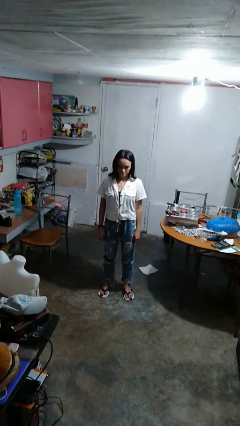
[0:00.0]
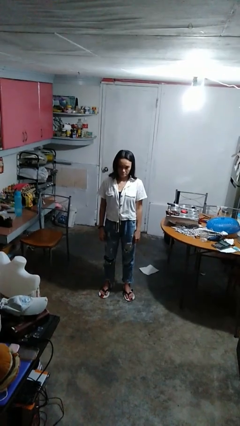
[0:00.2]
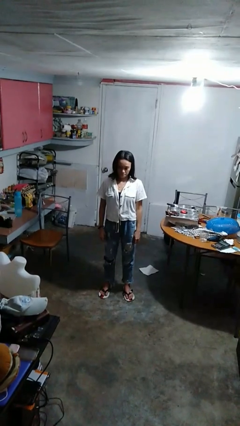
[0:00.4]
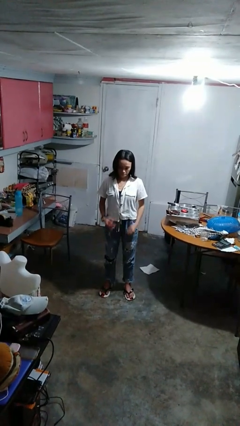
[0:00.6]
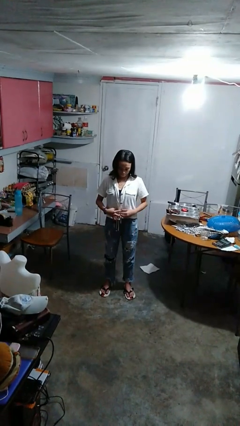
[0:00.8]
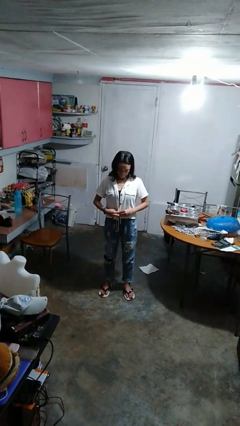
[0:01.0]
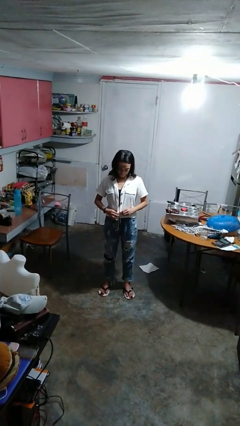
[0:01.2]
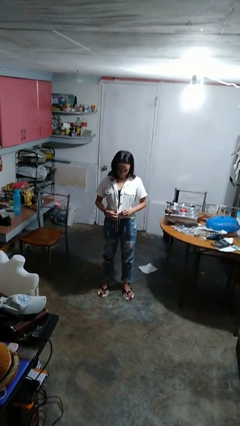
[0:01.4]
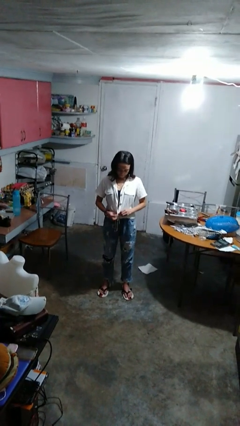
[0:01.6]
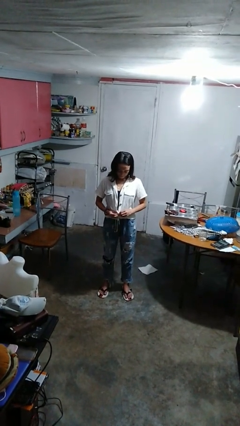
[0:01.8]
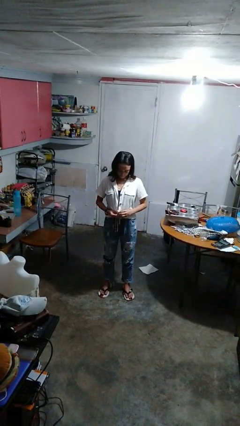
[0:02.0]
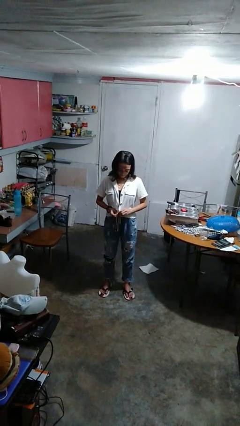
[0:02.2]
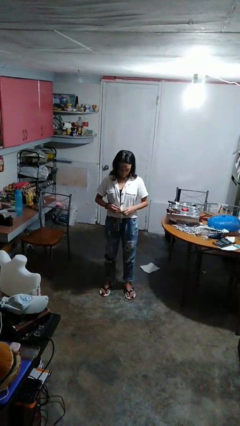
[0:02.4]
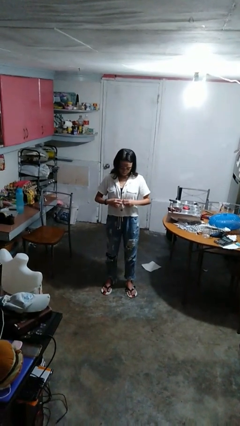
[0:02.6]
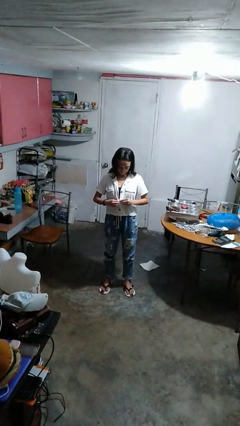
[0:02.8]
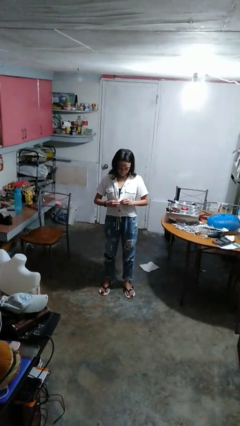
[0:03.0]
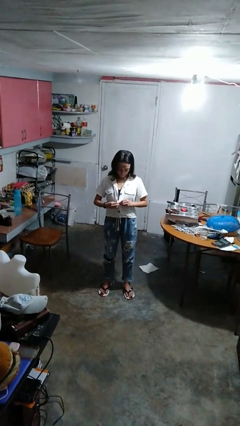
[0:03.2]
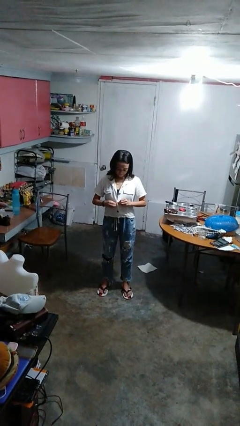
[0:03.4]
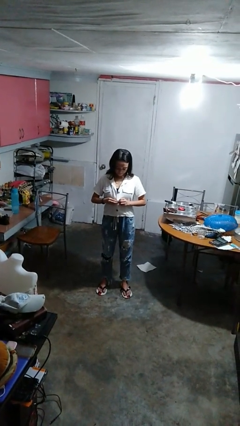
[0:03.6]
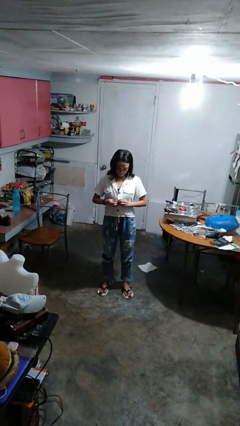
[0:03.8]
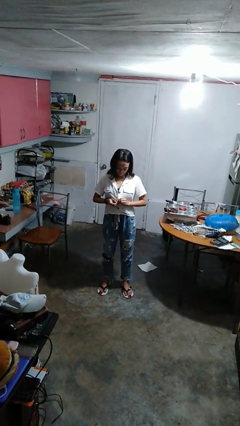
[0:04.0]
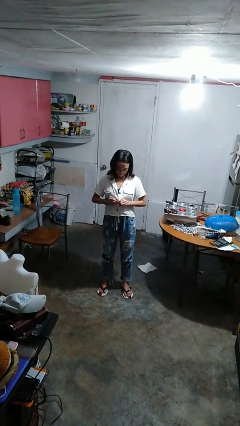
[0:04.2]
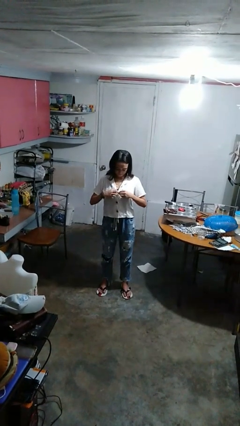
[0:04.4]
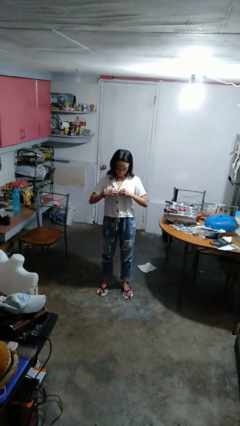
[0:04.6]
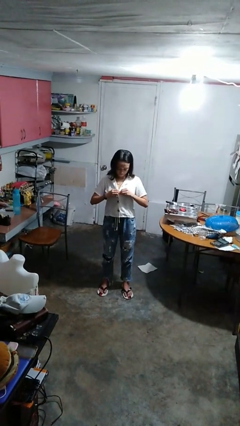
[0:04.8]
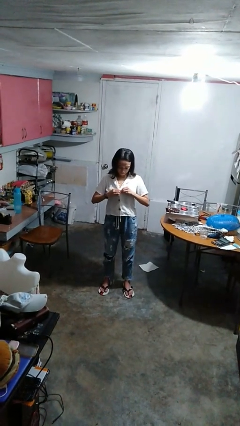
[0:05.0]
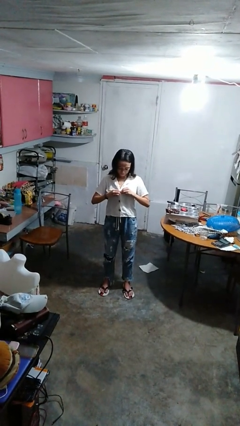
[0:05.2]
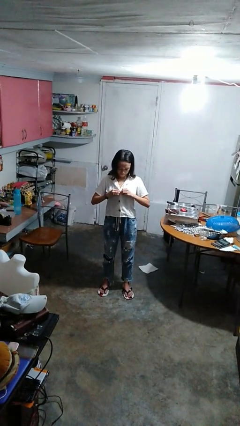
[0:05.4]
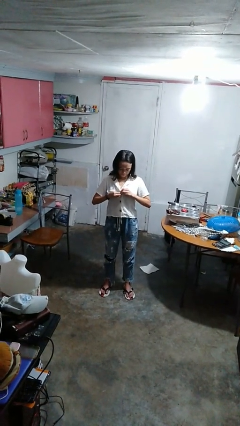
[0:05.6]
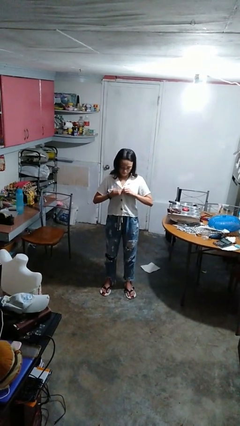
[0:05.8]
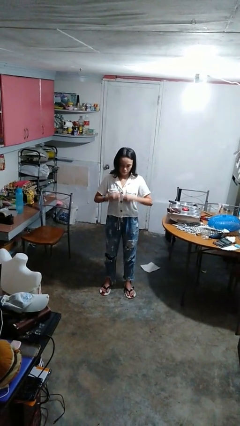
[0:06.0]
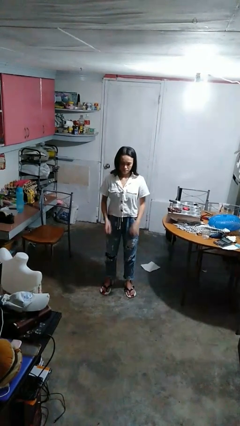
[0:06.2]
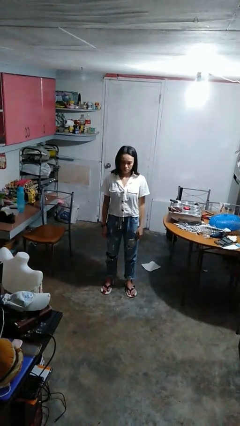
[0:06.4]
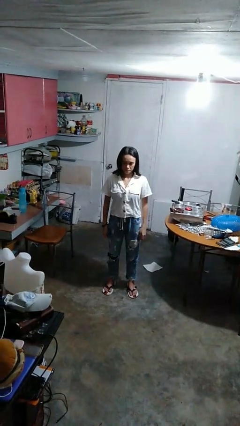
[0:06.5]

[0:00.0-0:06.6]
person buttons shirt

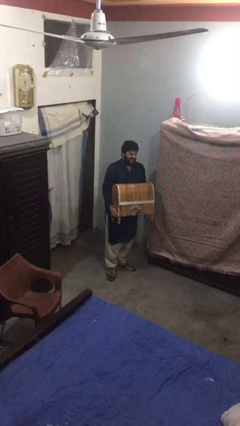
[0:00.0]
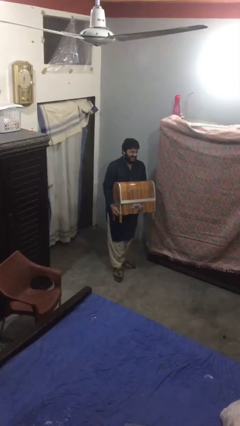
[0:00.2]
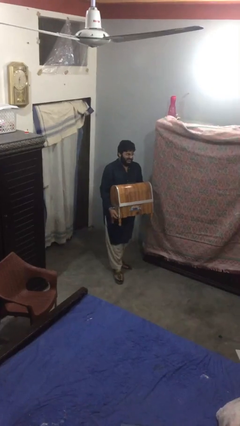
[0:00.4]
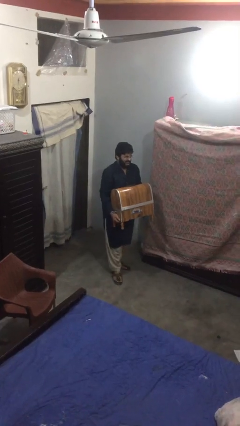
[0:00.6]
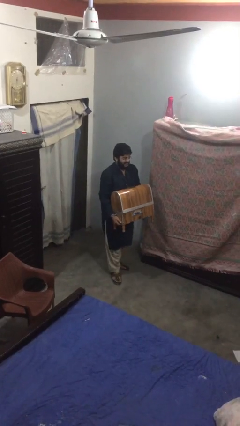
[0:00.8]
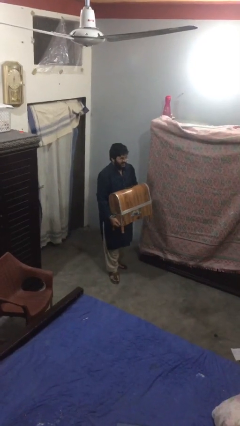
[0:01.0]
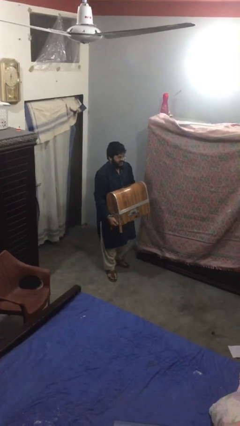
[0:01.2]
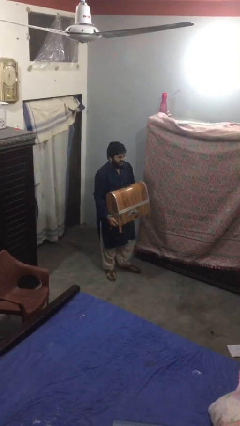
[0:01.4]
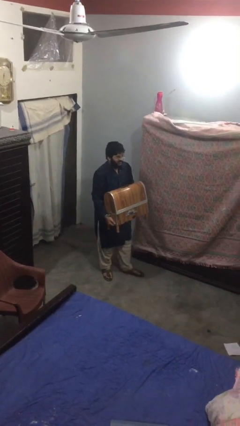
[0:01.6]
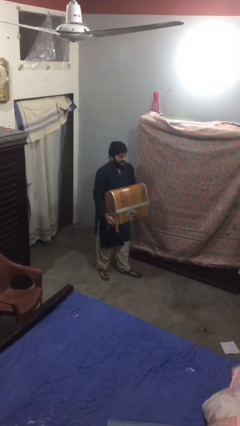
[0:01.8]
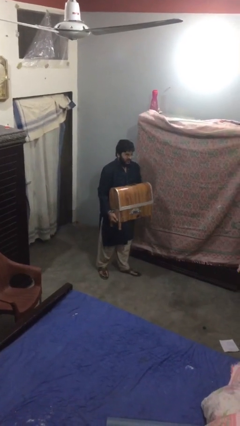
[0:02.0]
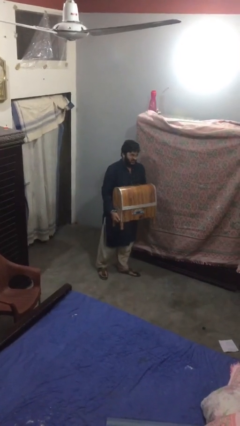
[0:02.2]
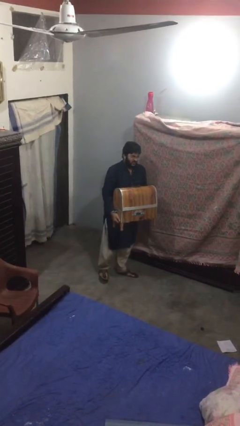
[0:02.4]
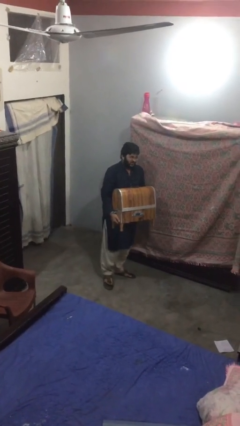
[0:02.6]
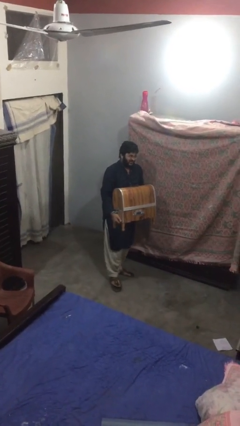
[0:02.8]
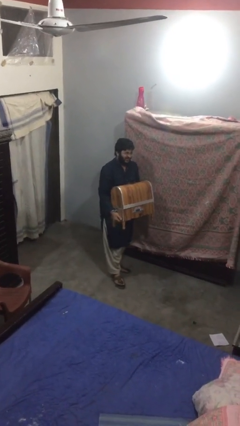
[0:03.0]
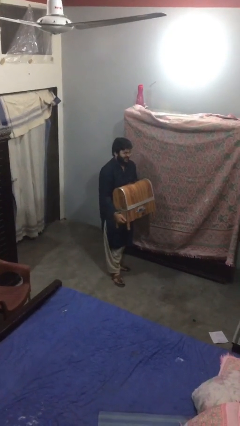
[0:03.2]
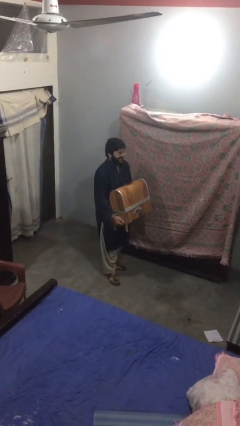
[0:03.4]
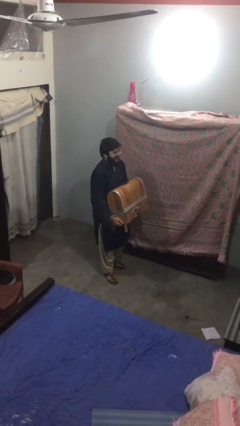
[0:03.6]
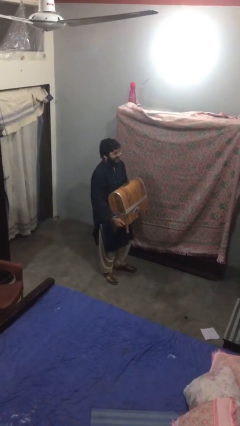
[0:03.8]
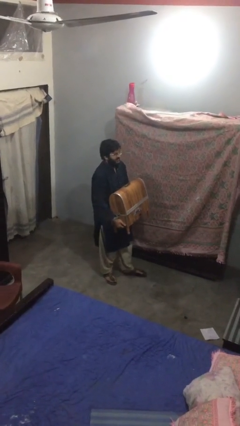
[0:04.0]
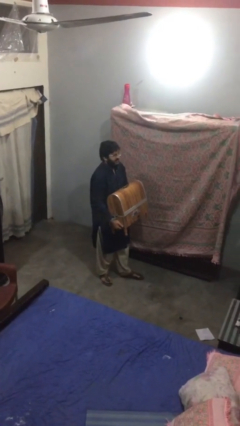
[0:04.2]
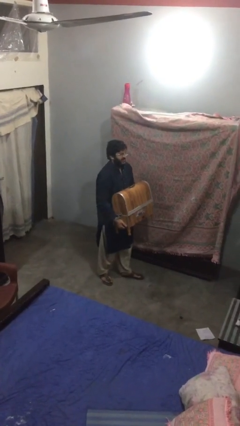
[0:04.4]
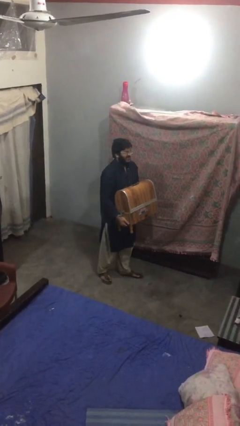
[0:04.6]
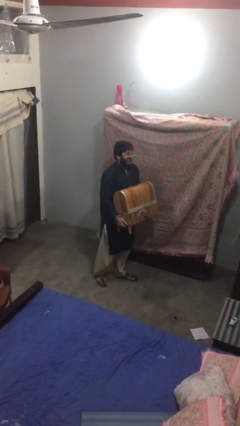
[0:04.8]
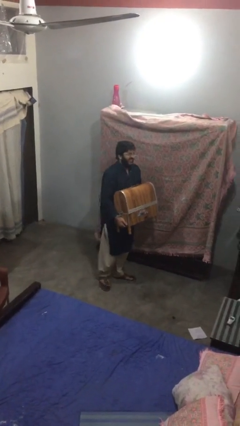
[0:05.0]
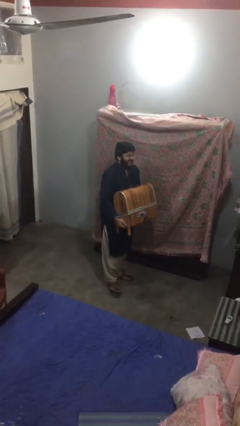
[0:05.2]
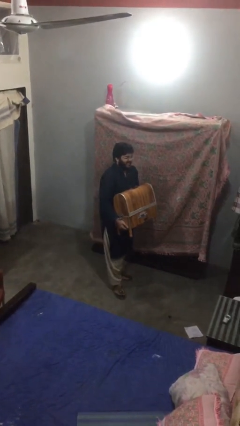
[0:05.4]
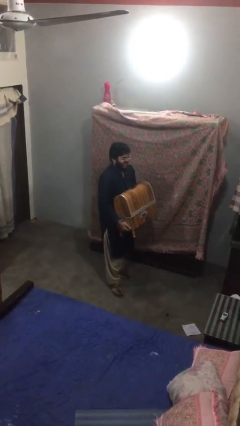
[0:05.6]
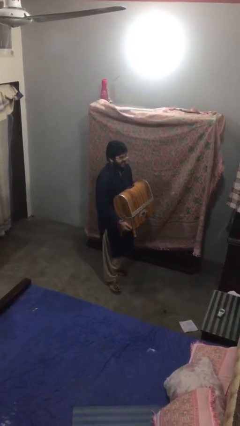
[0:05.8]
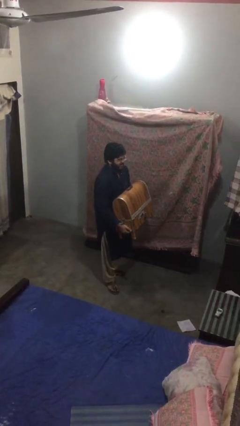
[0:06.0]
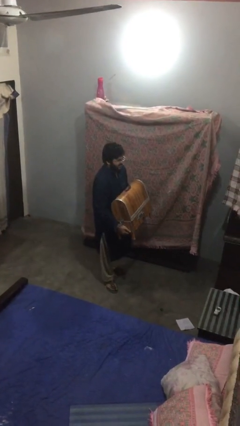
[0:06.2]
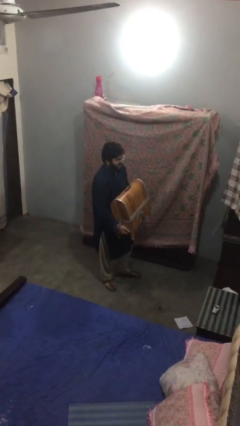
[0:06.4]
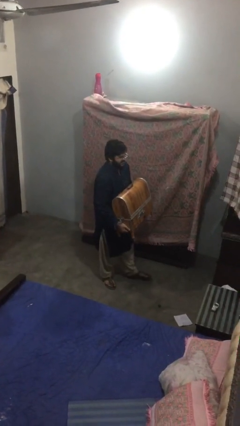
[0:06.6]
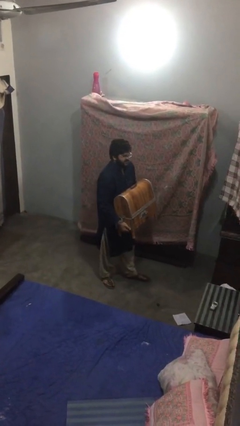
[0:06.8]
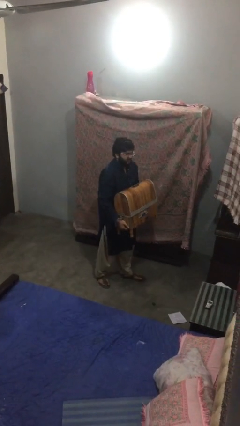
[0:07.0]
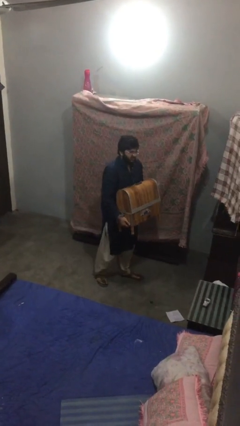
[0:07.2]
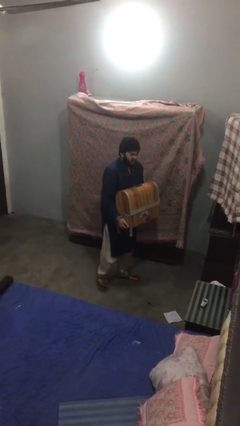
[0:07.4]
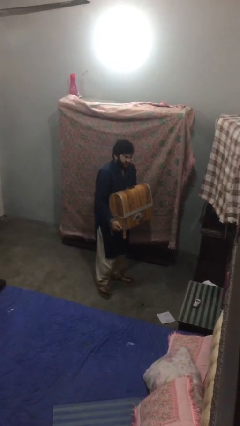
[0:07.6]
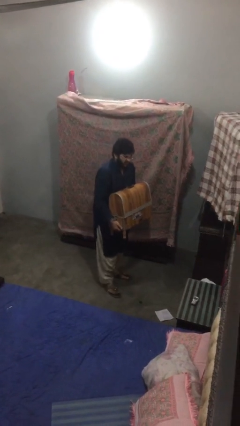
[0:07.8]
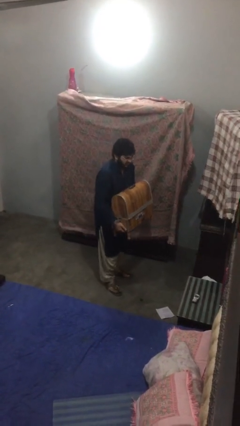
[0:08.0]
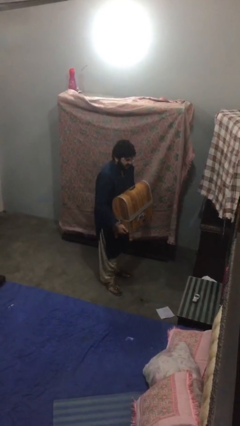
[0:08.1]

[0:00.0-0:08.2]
person carries heavy object

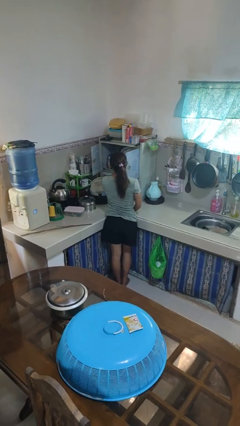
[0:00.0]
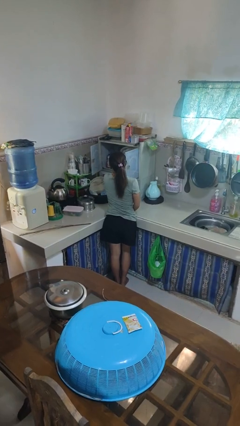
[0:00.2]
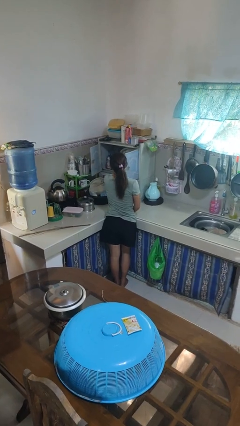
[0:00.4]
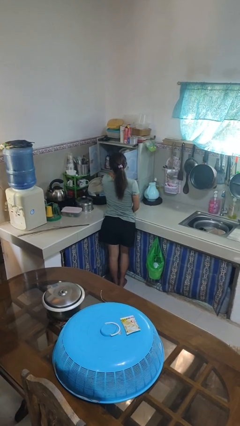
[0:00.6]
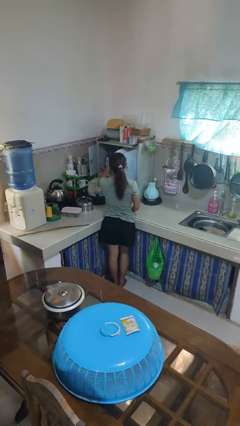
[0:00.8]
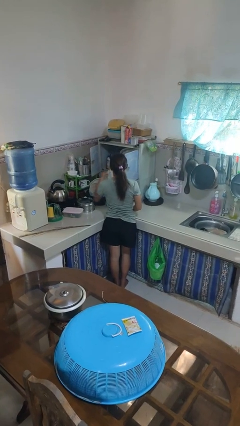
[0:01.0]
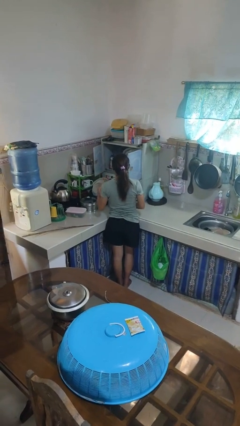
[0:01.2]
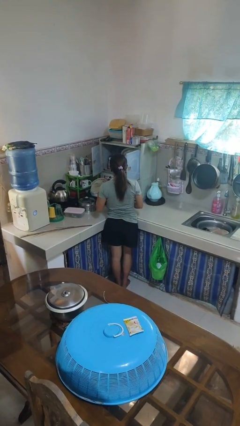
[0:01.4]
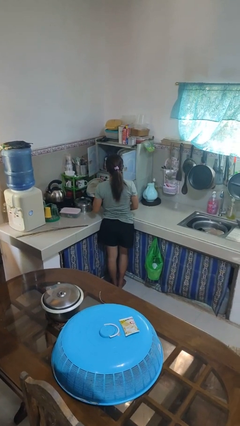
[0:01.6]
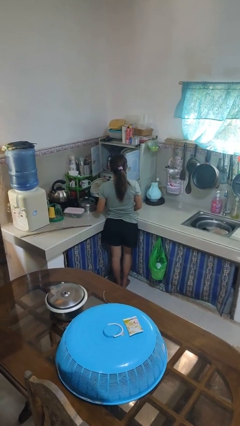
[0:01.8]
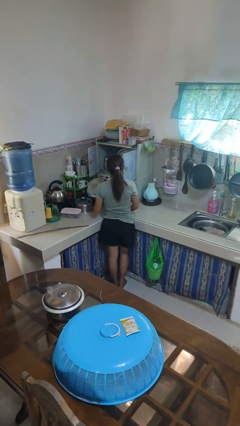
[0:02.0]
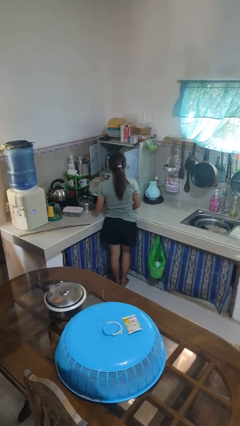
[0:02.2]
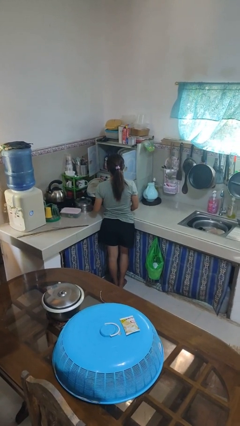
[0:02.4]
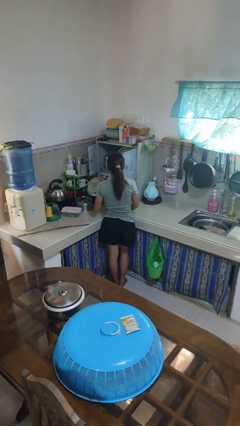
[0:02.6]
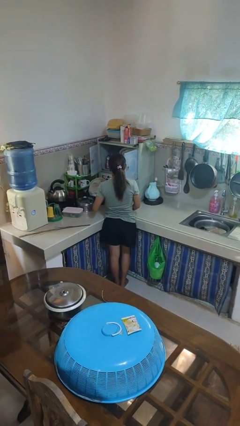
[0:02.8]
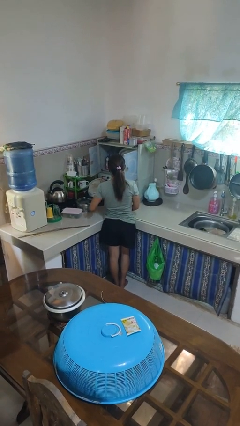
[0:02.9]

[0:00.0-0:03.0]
person takes object from kitchen drawer
